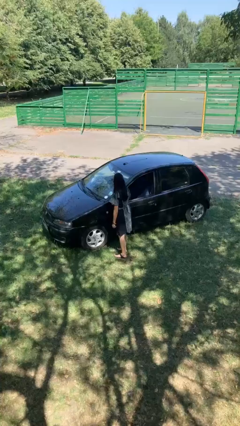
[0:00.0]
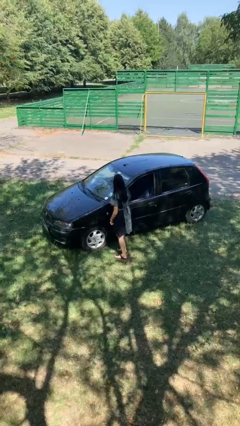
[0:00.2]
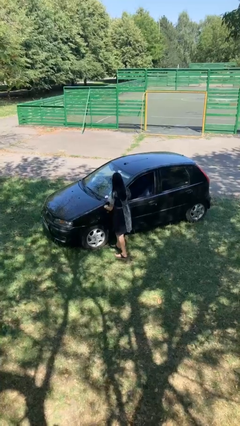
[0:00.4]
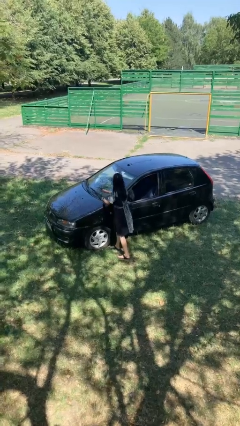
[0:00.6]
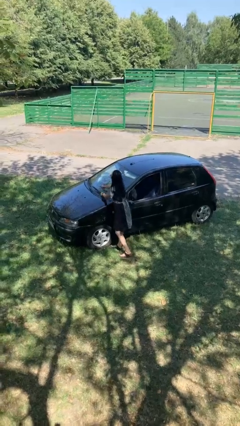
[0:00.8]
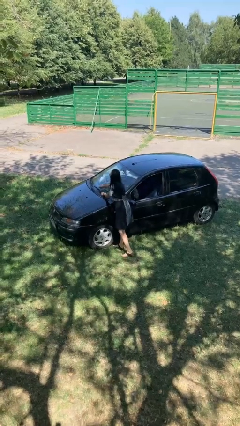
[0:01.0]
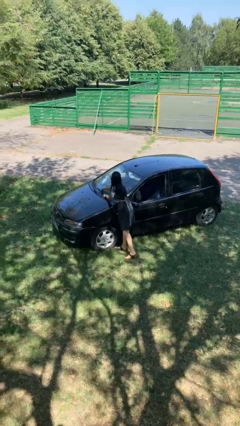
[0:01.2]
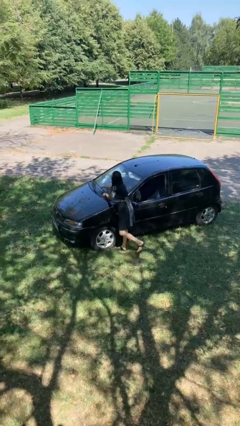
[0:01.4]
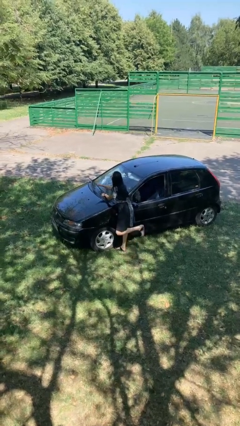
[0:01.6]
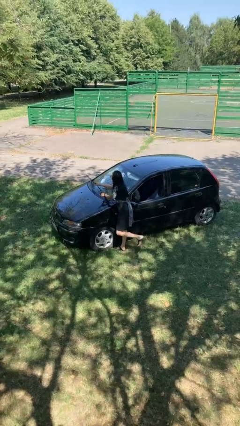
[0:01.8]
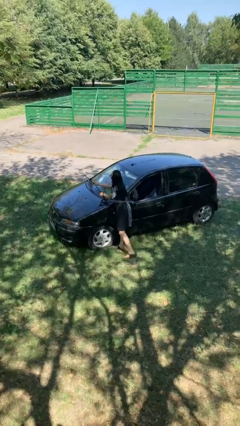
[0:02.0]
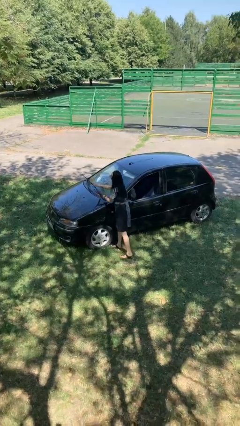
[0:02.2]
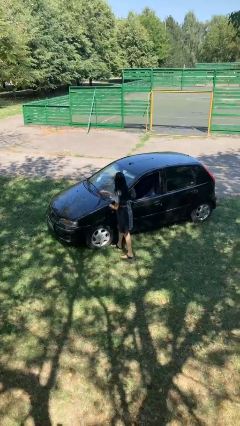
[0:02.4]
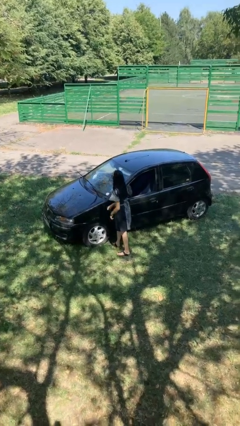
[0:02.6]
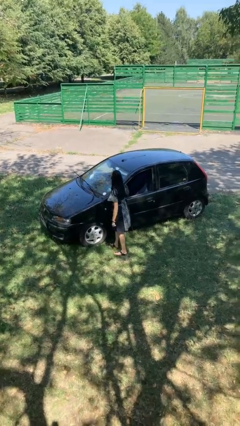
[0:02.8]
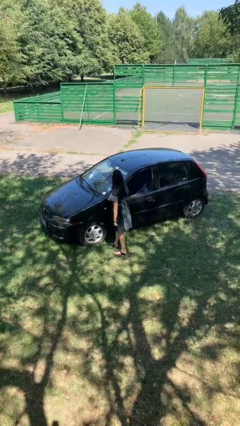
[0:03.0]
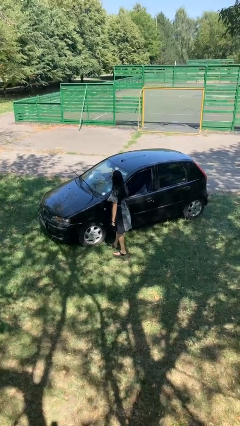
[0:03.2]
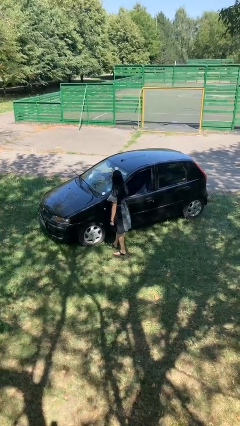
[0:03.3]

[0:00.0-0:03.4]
person flips up car wipers

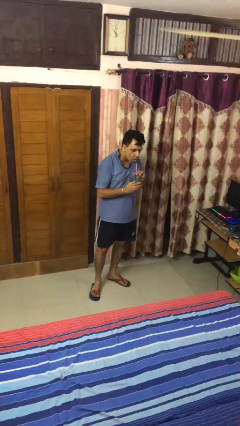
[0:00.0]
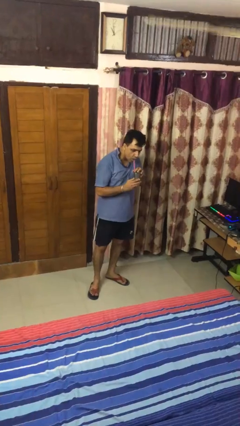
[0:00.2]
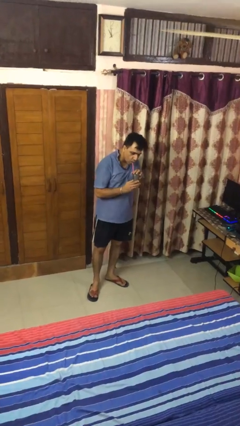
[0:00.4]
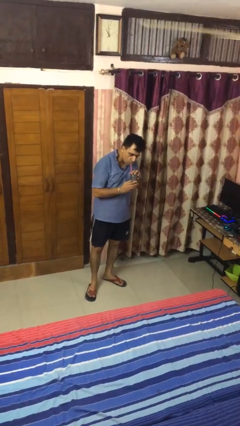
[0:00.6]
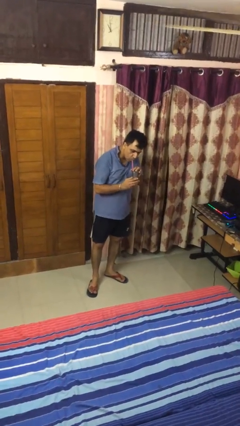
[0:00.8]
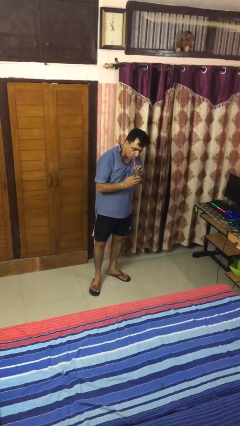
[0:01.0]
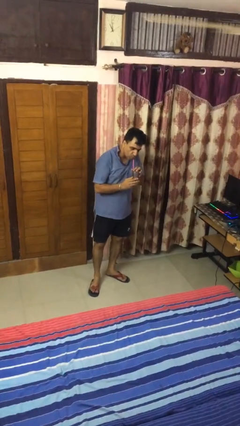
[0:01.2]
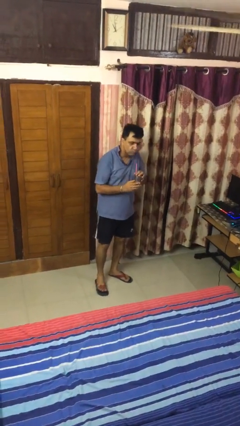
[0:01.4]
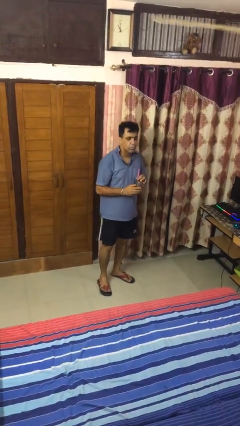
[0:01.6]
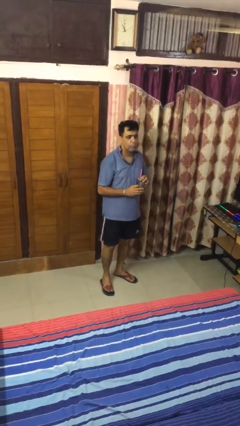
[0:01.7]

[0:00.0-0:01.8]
person drinks from straw

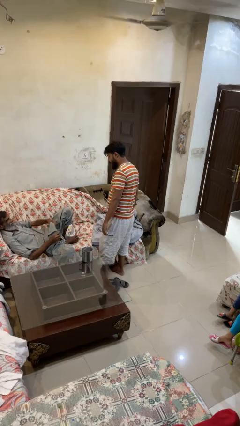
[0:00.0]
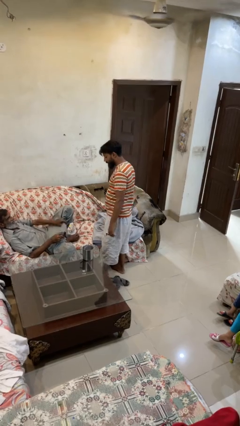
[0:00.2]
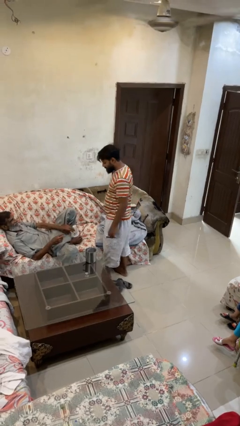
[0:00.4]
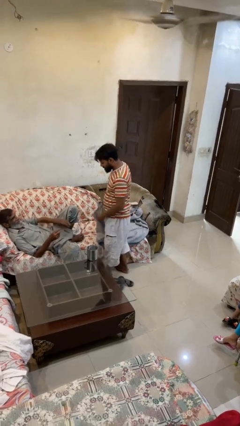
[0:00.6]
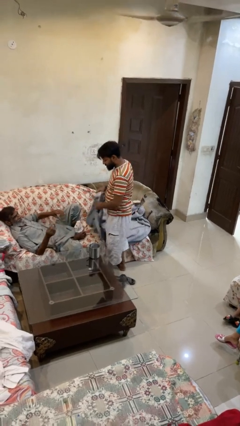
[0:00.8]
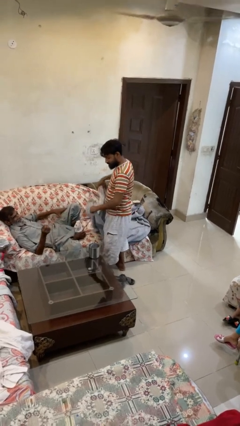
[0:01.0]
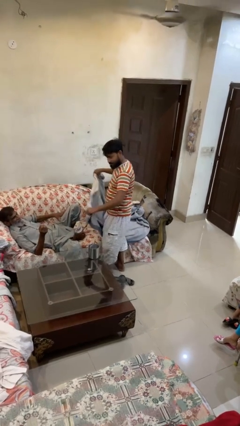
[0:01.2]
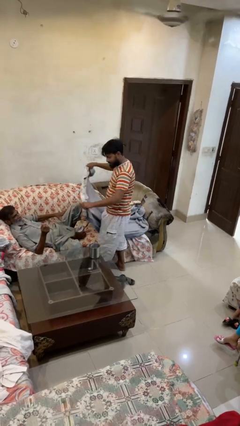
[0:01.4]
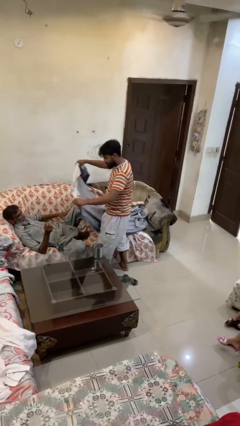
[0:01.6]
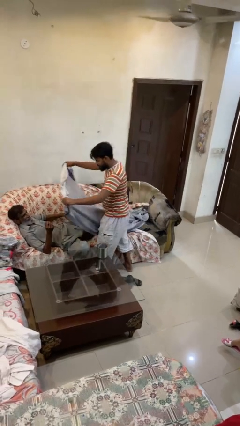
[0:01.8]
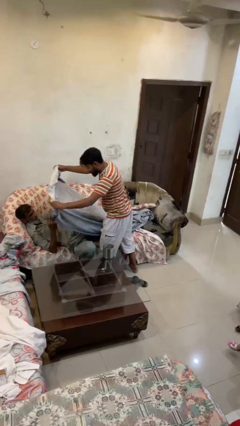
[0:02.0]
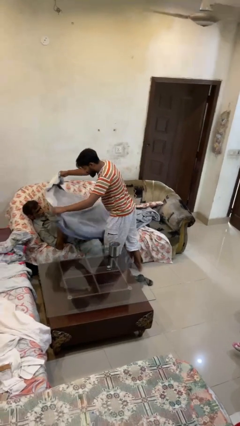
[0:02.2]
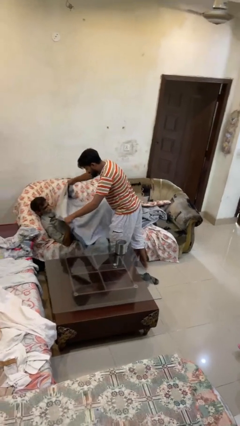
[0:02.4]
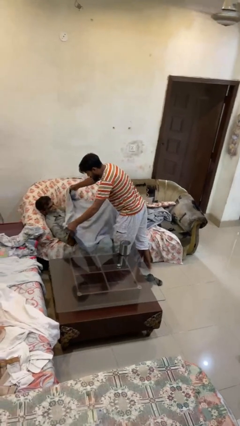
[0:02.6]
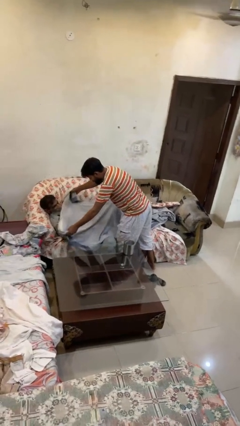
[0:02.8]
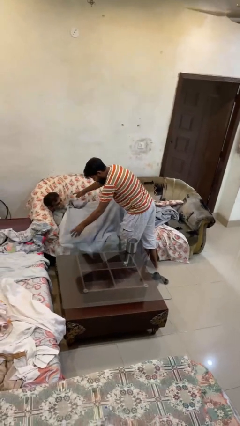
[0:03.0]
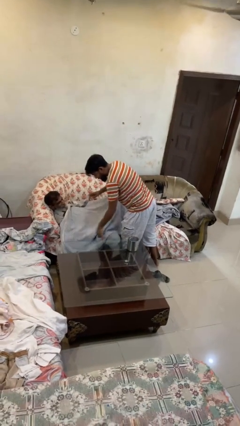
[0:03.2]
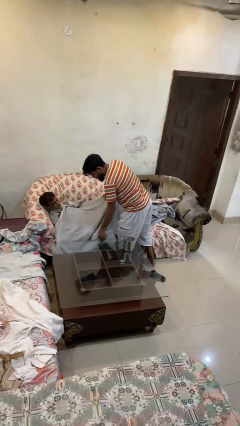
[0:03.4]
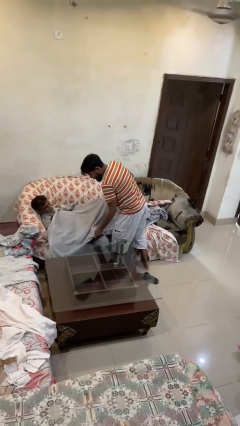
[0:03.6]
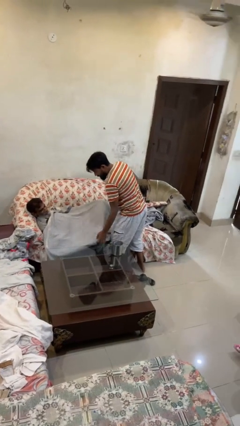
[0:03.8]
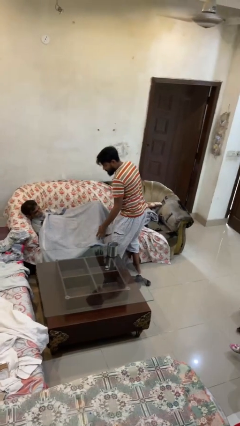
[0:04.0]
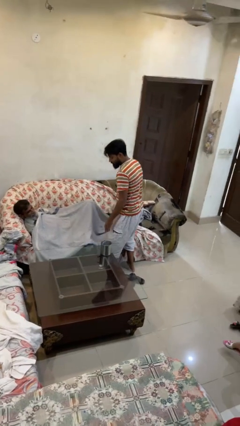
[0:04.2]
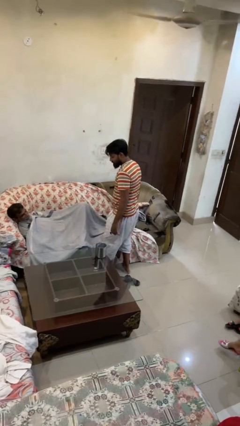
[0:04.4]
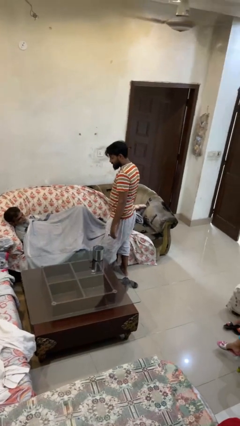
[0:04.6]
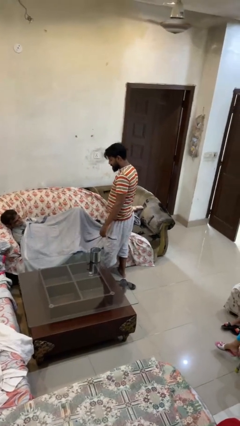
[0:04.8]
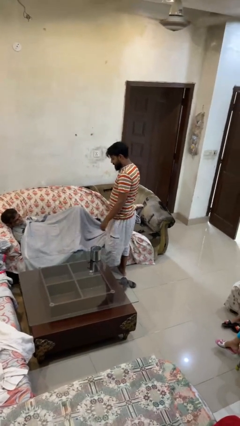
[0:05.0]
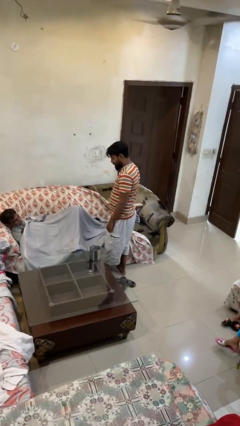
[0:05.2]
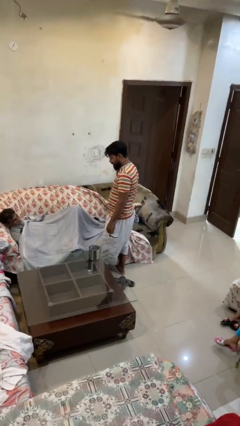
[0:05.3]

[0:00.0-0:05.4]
person covers friend with blanket

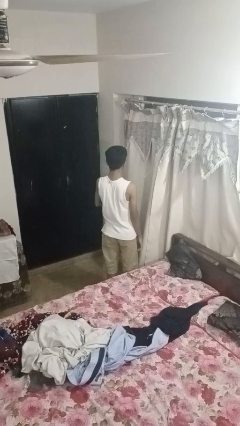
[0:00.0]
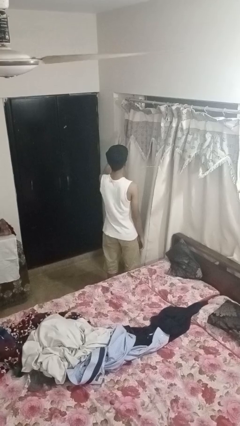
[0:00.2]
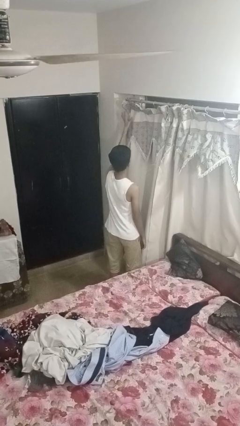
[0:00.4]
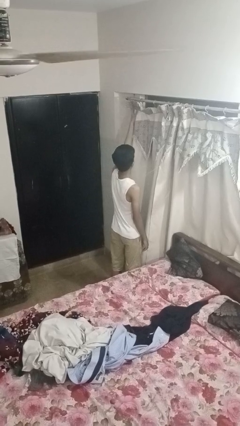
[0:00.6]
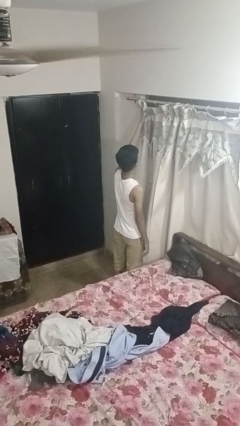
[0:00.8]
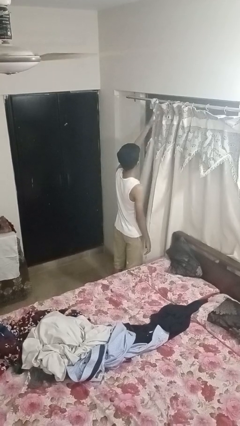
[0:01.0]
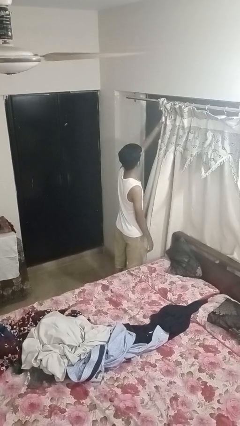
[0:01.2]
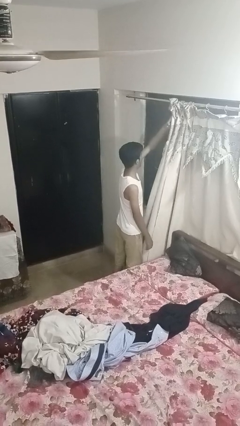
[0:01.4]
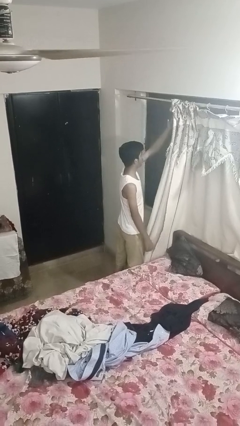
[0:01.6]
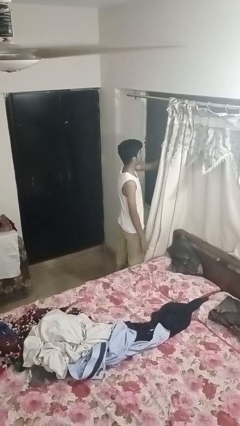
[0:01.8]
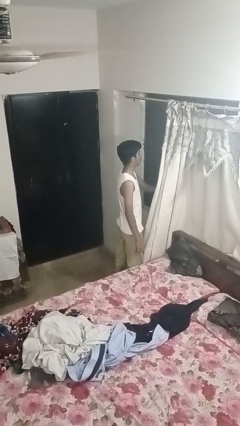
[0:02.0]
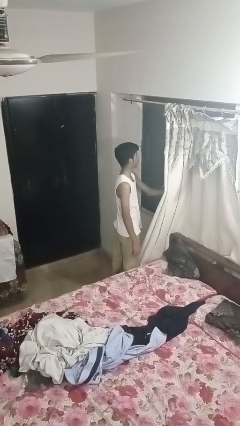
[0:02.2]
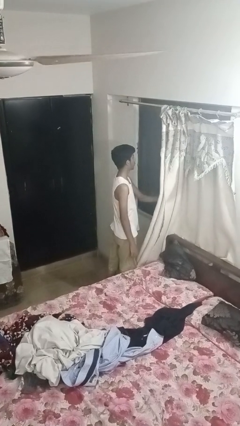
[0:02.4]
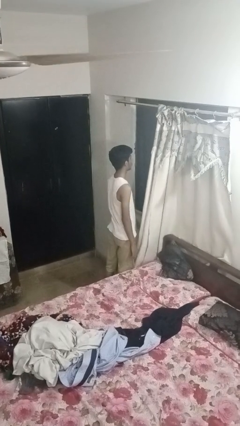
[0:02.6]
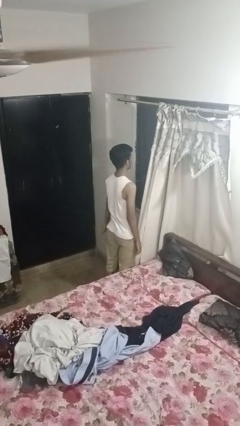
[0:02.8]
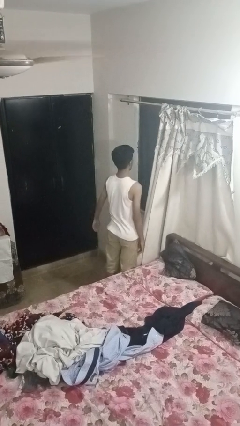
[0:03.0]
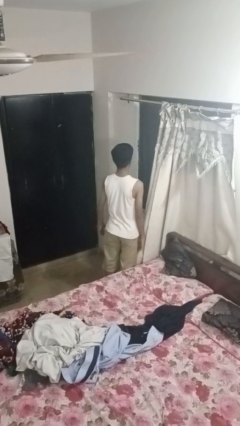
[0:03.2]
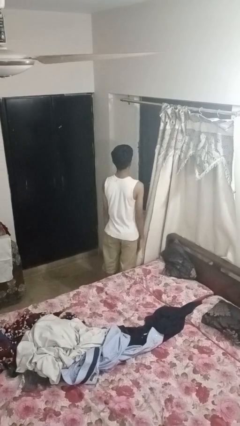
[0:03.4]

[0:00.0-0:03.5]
person opens curtains

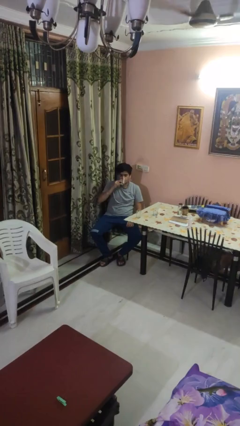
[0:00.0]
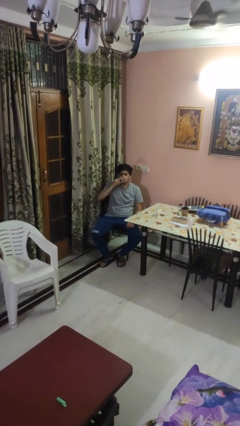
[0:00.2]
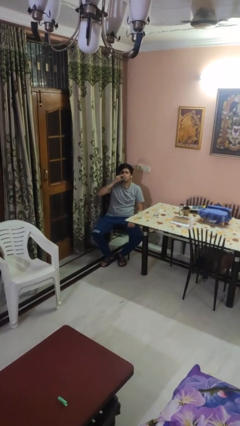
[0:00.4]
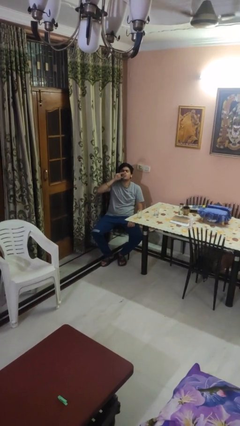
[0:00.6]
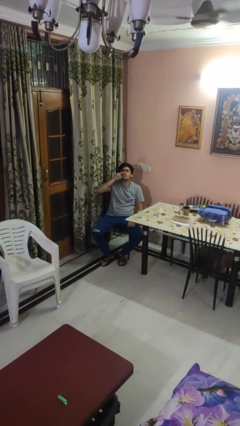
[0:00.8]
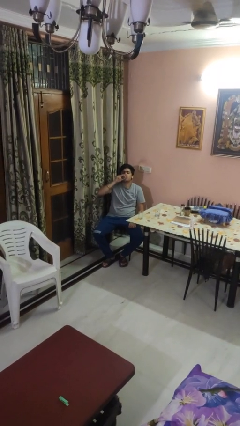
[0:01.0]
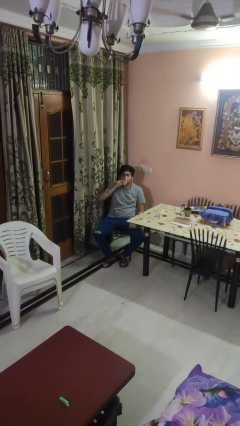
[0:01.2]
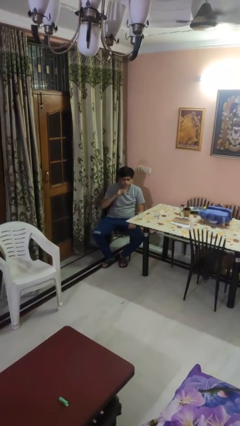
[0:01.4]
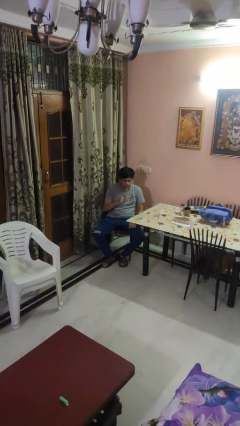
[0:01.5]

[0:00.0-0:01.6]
person drinks from shotglass

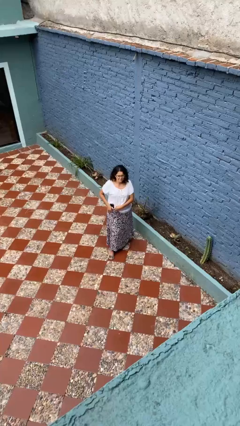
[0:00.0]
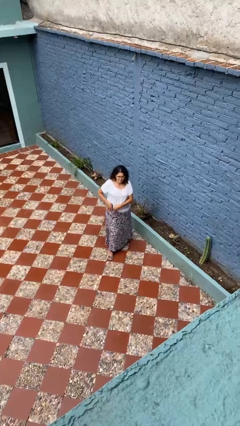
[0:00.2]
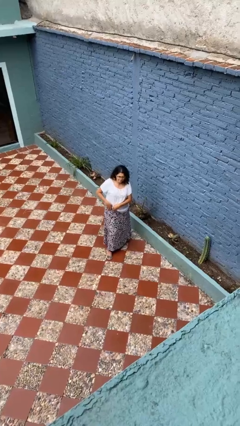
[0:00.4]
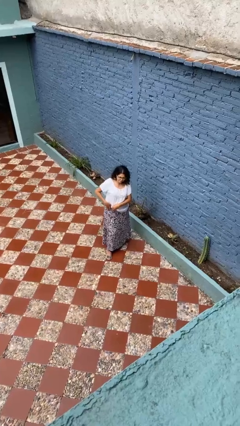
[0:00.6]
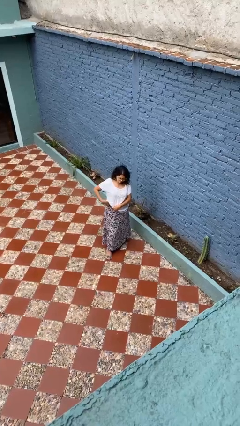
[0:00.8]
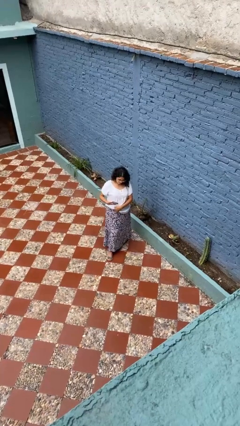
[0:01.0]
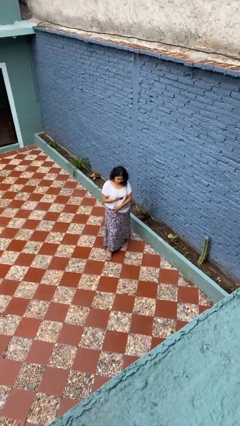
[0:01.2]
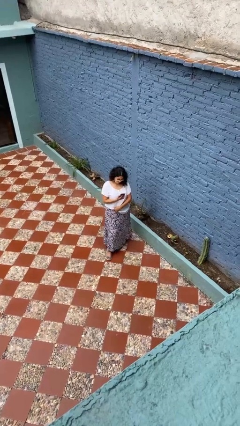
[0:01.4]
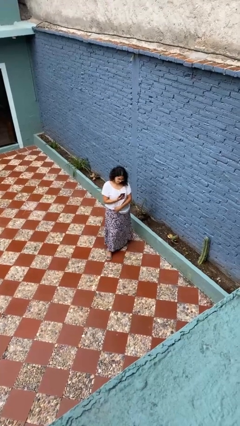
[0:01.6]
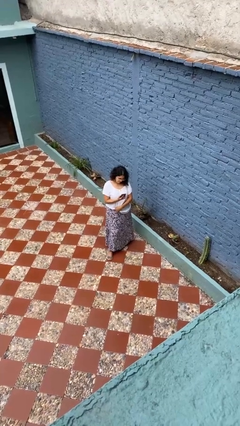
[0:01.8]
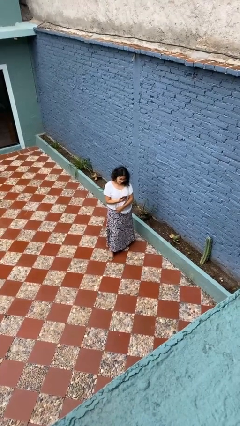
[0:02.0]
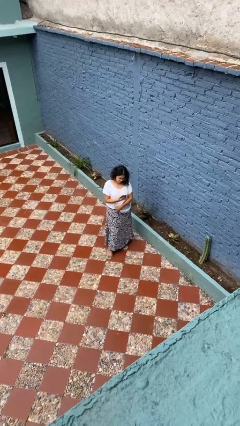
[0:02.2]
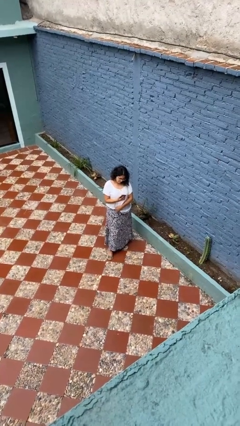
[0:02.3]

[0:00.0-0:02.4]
person takes phone from pocket
